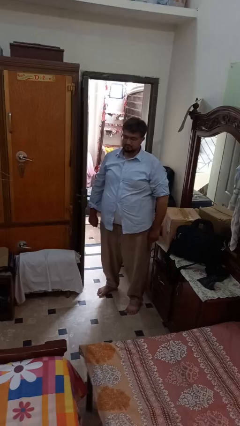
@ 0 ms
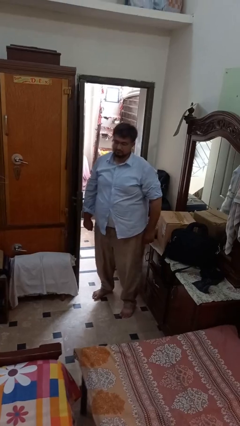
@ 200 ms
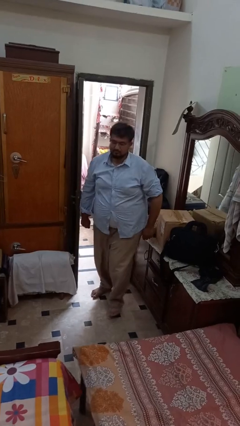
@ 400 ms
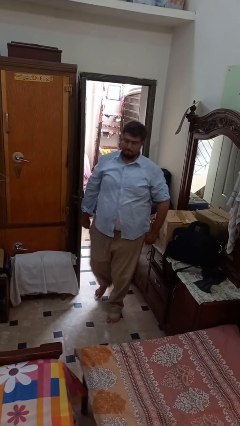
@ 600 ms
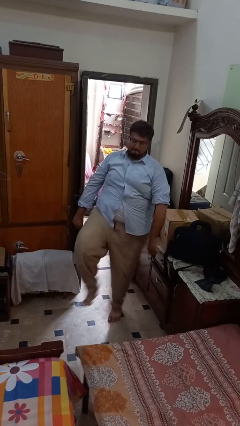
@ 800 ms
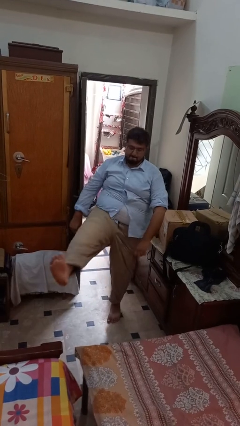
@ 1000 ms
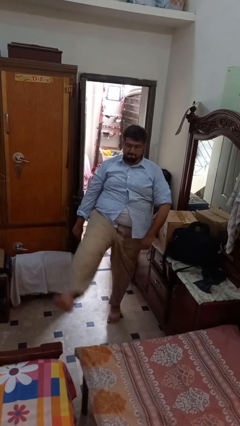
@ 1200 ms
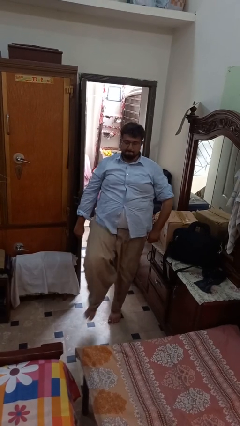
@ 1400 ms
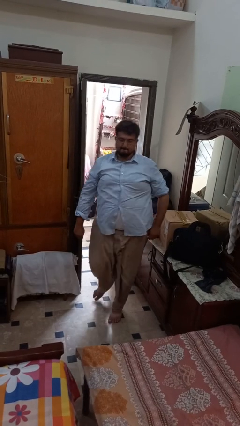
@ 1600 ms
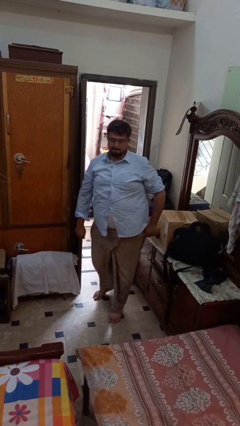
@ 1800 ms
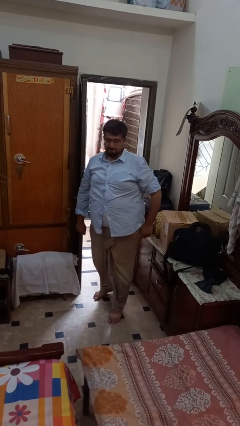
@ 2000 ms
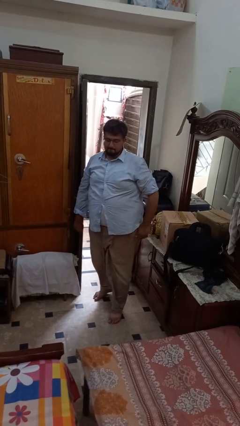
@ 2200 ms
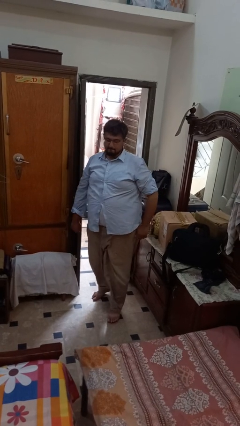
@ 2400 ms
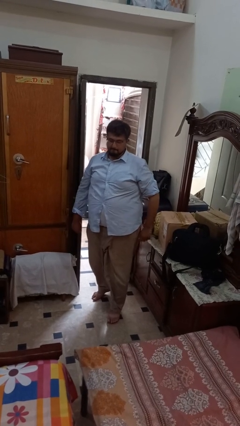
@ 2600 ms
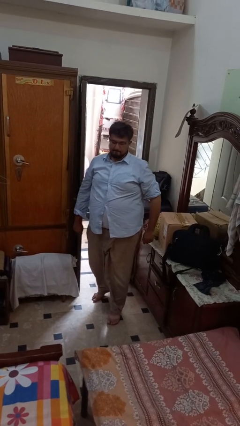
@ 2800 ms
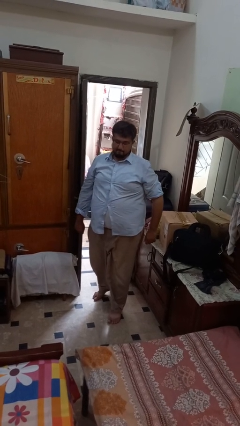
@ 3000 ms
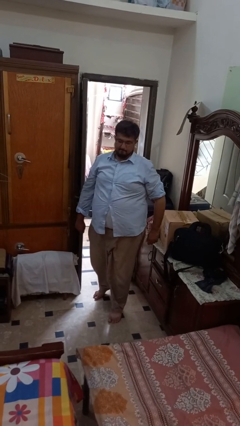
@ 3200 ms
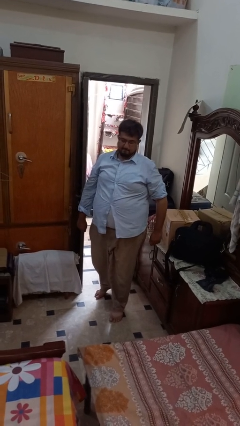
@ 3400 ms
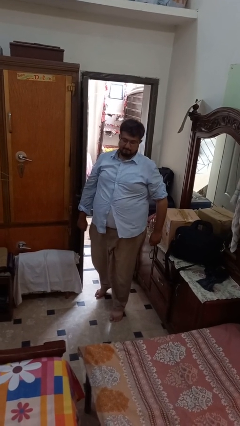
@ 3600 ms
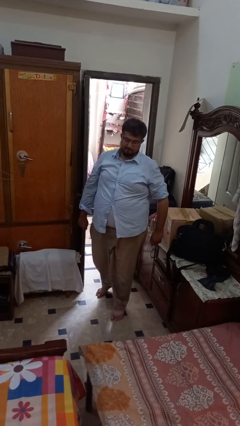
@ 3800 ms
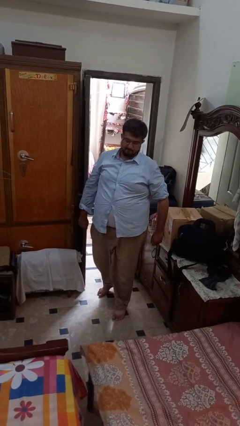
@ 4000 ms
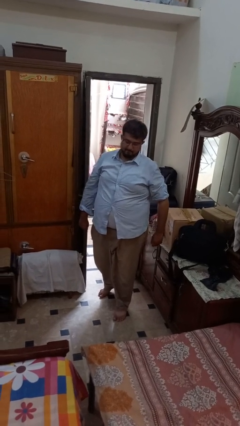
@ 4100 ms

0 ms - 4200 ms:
person karate kicks

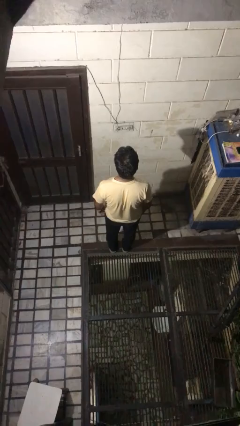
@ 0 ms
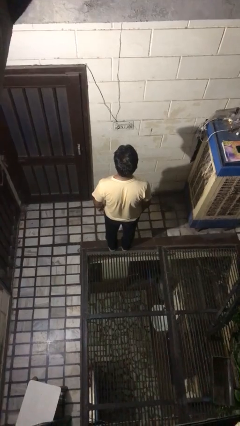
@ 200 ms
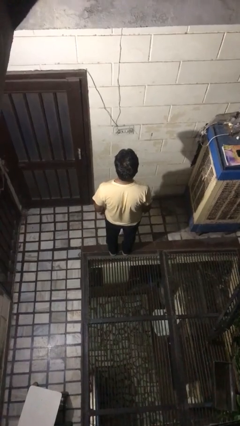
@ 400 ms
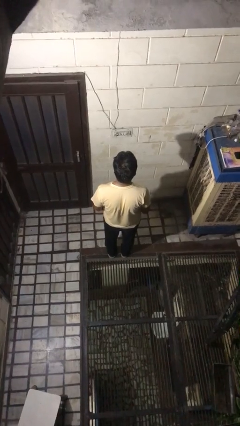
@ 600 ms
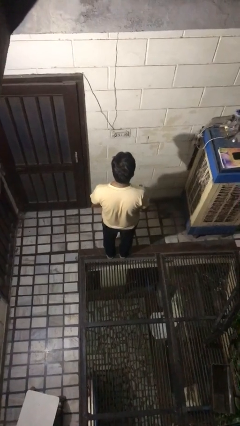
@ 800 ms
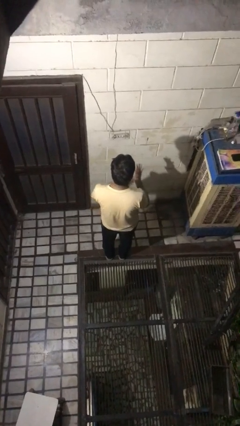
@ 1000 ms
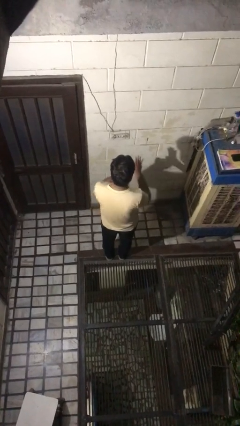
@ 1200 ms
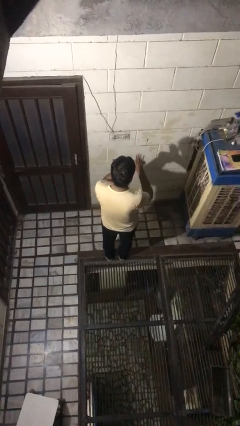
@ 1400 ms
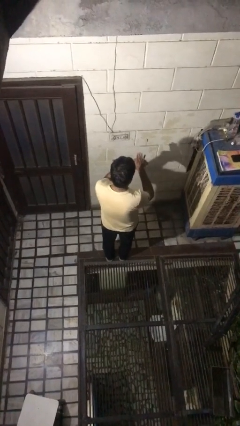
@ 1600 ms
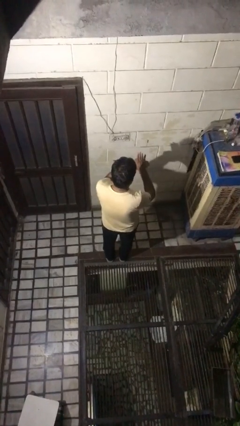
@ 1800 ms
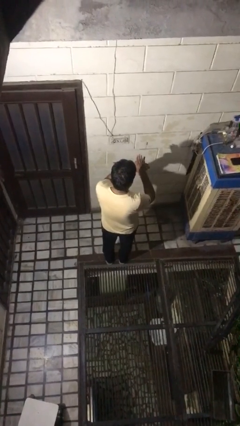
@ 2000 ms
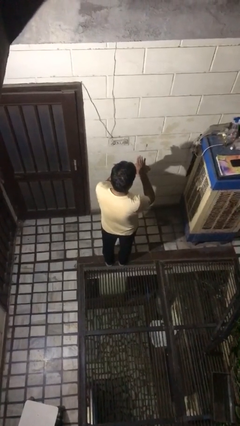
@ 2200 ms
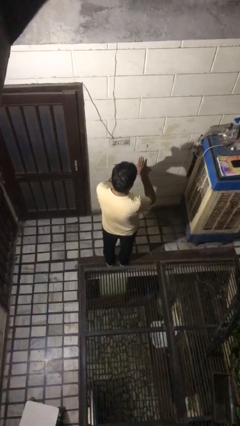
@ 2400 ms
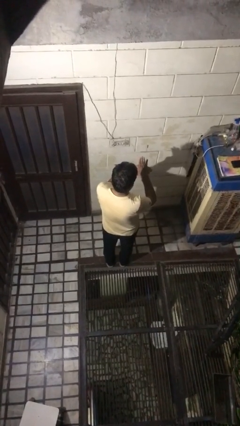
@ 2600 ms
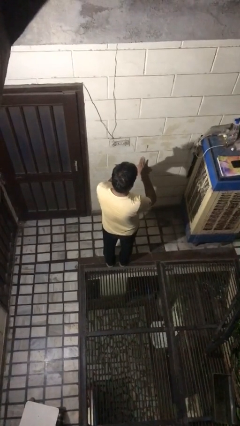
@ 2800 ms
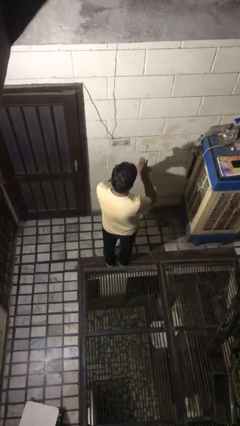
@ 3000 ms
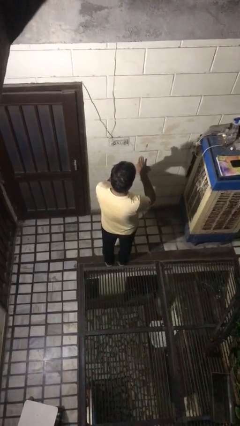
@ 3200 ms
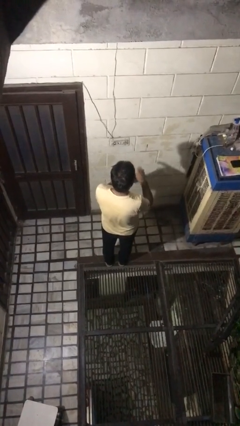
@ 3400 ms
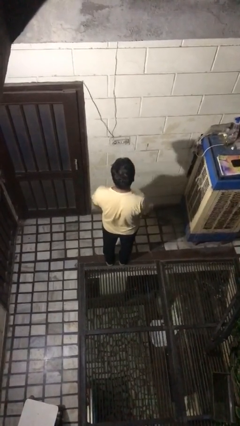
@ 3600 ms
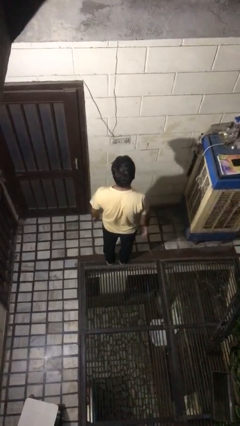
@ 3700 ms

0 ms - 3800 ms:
person gestures number four

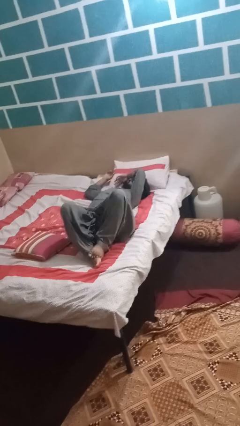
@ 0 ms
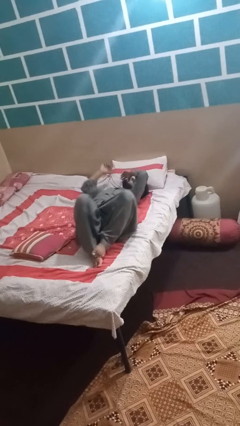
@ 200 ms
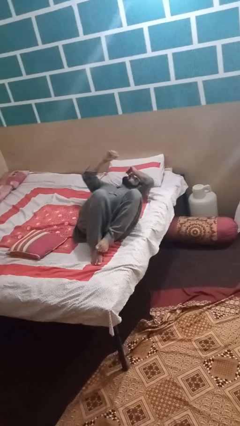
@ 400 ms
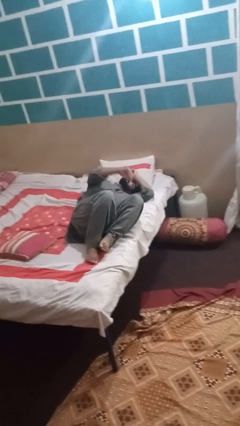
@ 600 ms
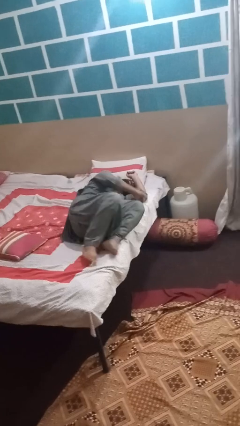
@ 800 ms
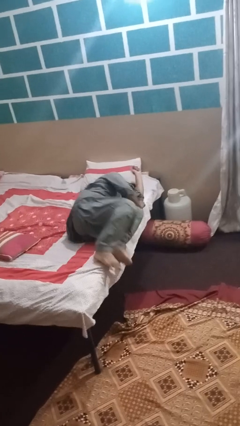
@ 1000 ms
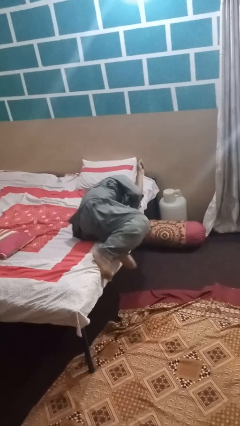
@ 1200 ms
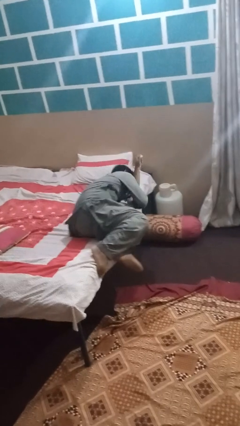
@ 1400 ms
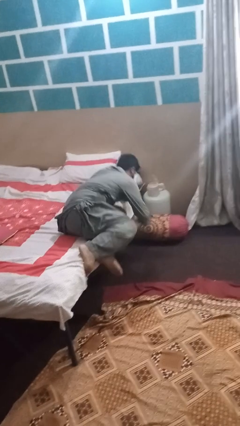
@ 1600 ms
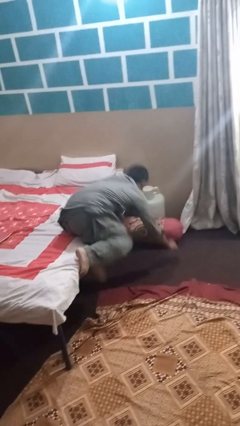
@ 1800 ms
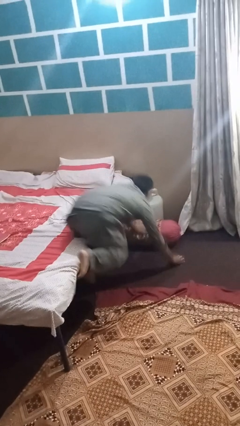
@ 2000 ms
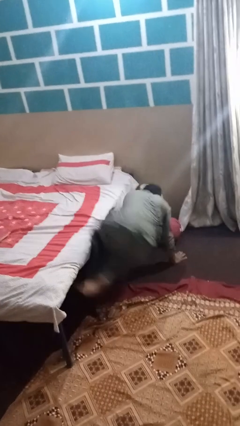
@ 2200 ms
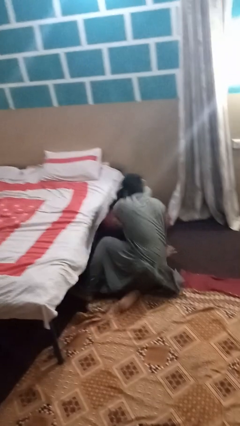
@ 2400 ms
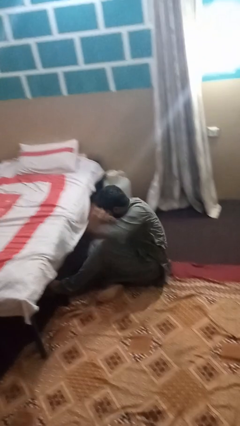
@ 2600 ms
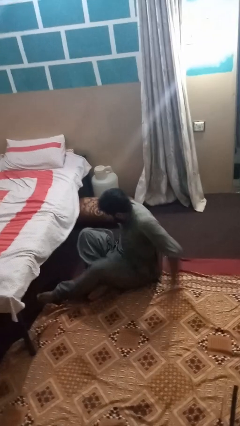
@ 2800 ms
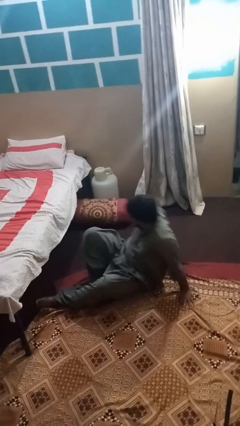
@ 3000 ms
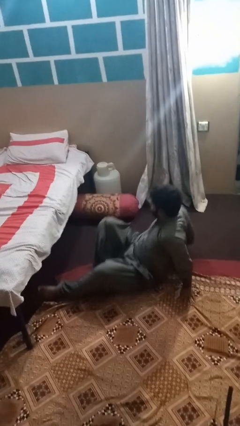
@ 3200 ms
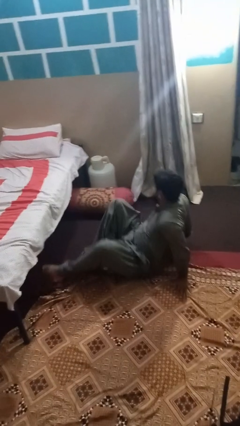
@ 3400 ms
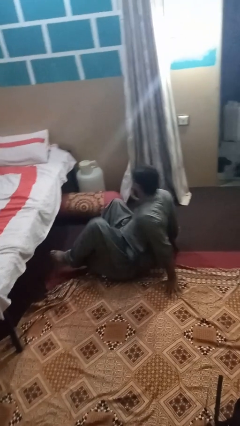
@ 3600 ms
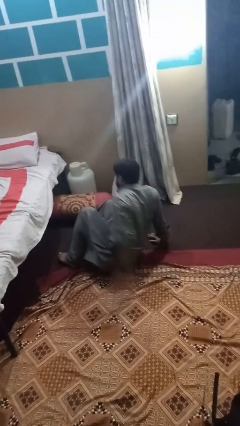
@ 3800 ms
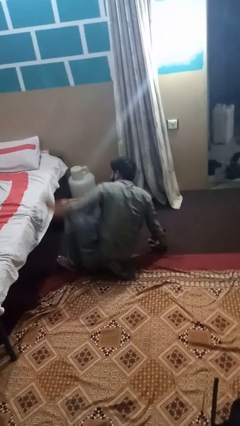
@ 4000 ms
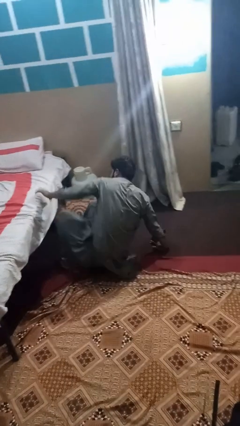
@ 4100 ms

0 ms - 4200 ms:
person falls from bed

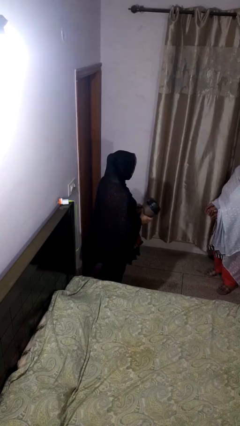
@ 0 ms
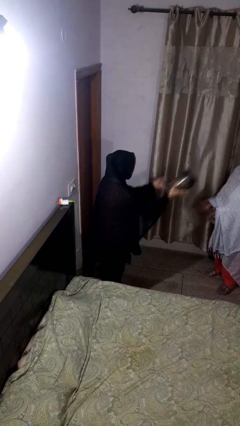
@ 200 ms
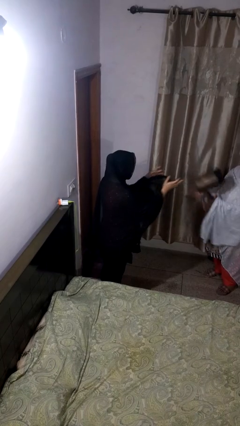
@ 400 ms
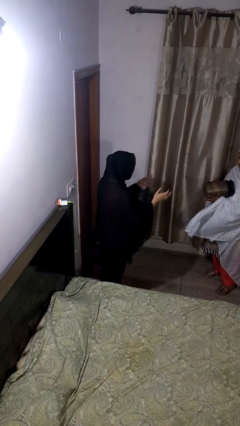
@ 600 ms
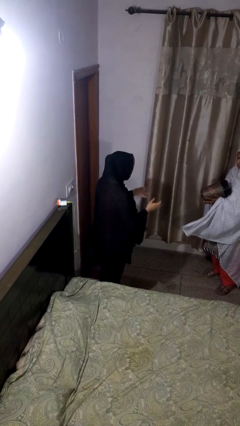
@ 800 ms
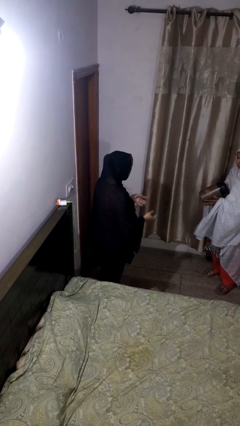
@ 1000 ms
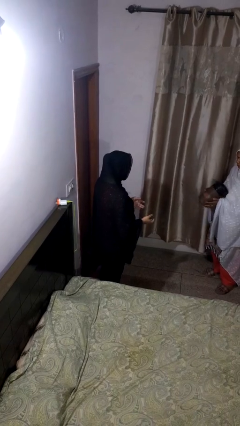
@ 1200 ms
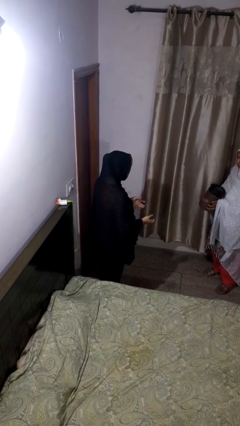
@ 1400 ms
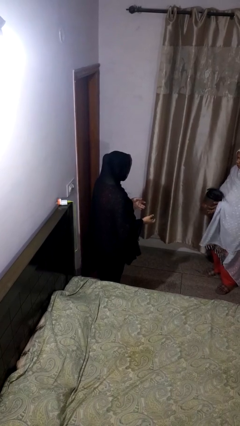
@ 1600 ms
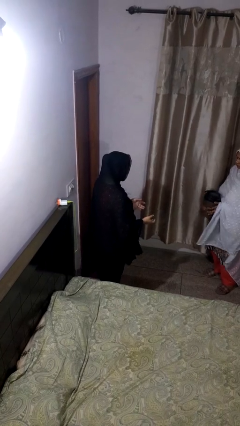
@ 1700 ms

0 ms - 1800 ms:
person throws object to person

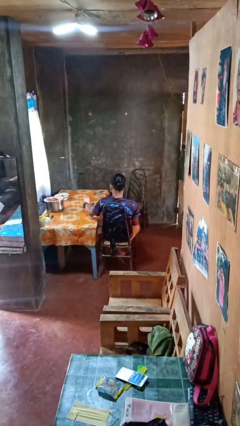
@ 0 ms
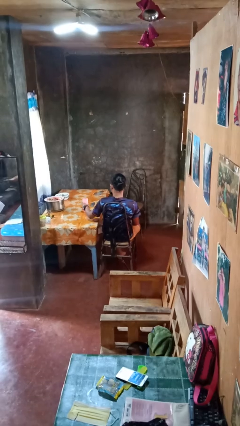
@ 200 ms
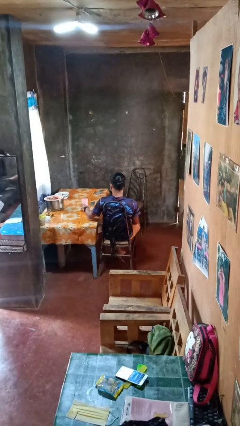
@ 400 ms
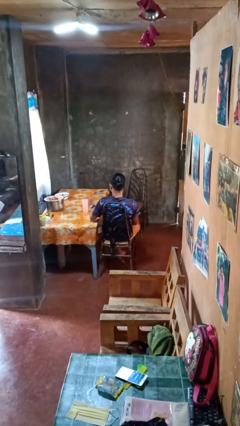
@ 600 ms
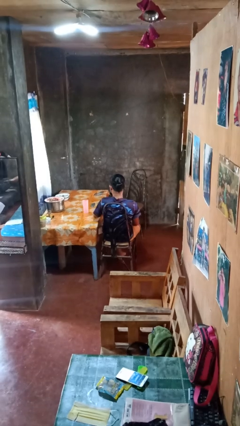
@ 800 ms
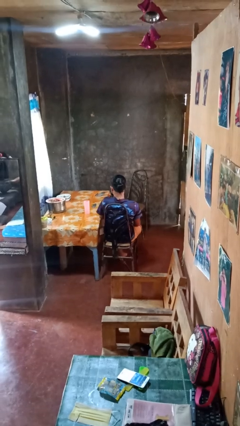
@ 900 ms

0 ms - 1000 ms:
person sets upright glass

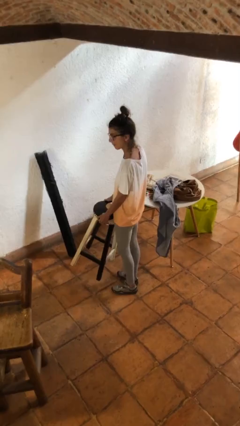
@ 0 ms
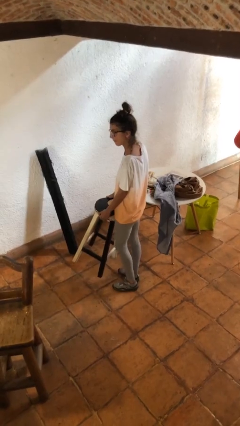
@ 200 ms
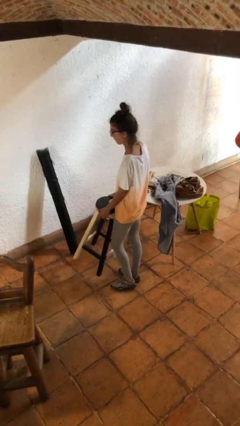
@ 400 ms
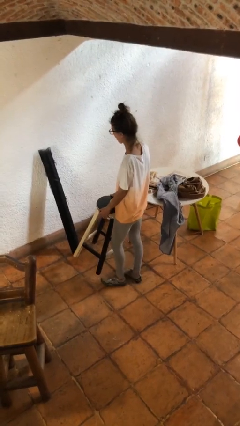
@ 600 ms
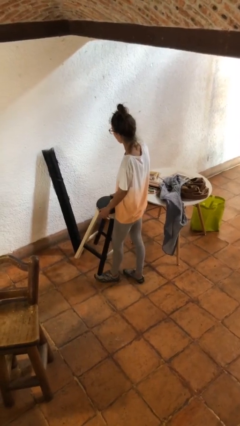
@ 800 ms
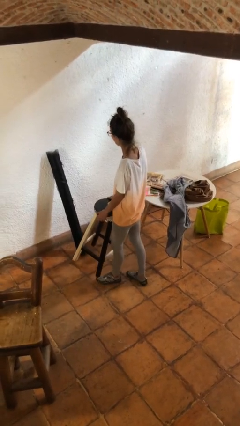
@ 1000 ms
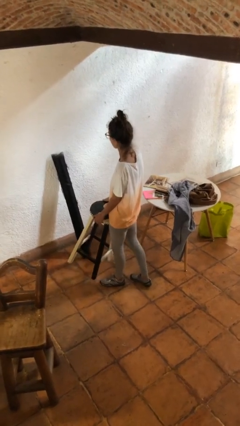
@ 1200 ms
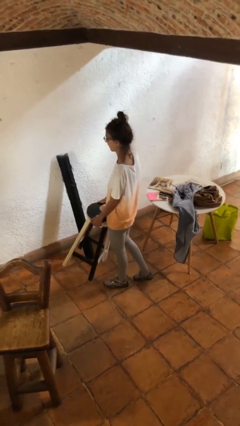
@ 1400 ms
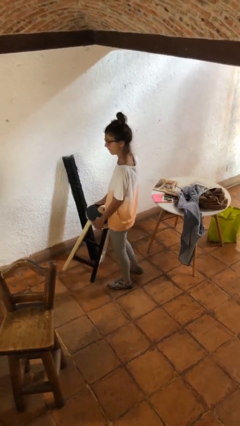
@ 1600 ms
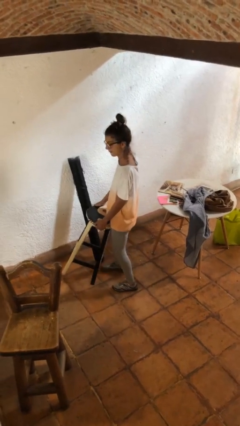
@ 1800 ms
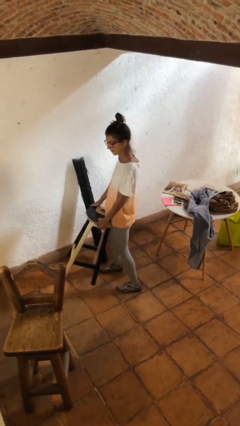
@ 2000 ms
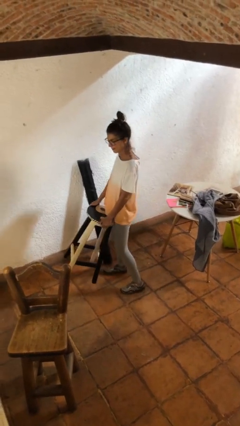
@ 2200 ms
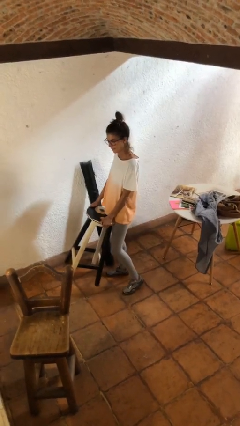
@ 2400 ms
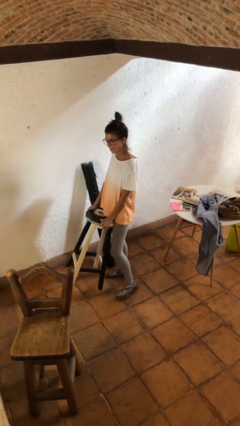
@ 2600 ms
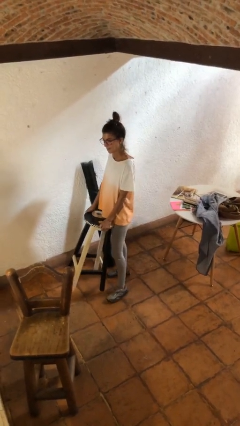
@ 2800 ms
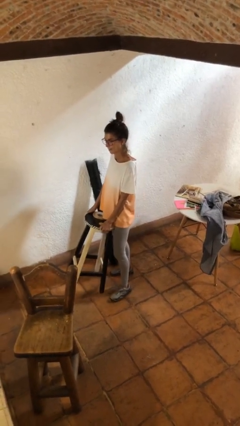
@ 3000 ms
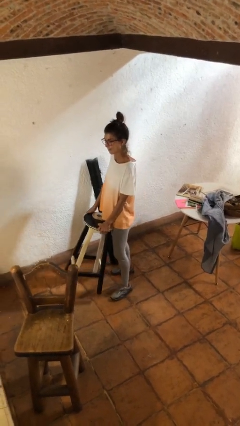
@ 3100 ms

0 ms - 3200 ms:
person carries furniture
